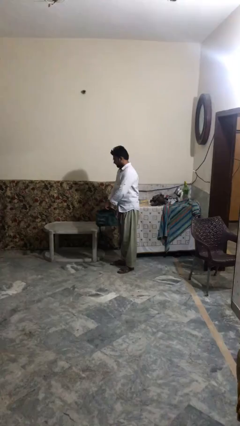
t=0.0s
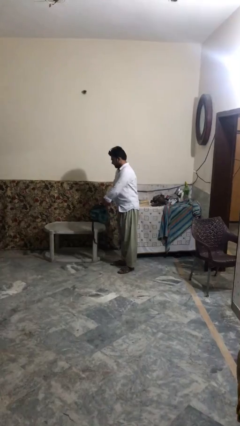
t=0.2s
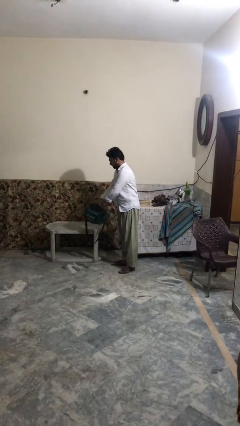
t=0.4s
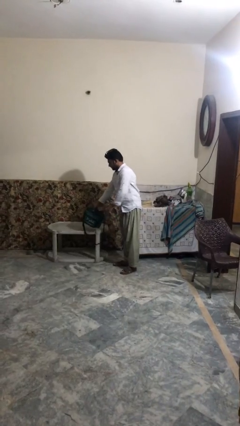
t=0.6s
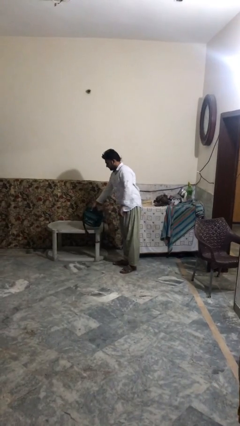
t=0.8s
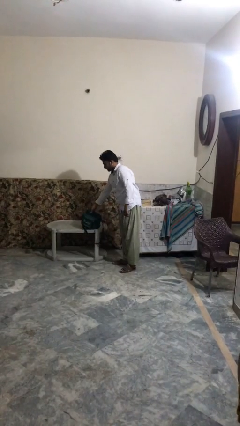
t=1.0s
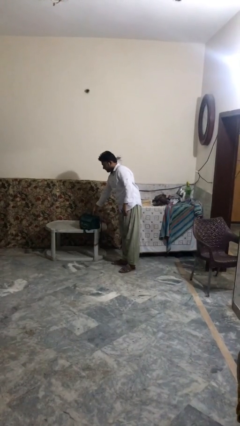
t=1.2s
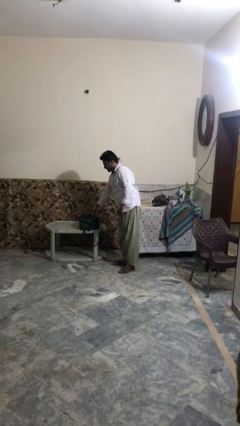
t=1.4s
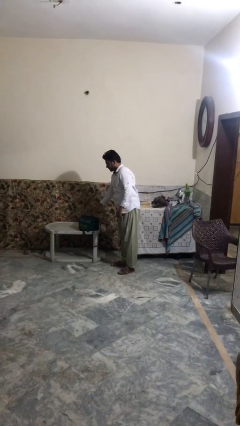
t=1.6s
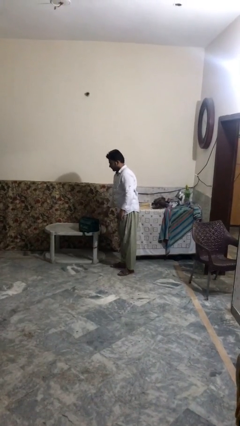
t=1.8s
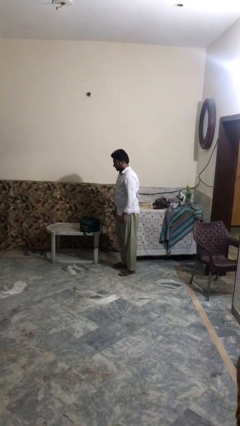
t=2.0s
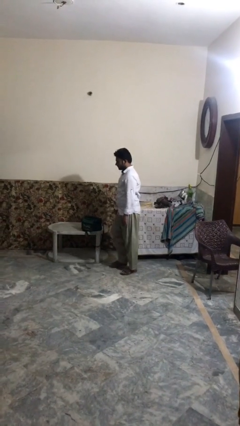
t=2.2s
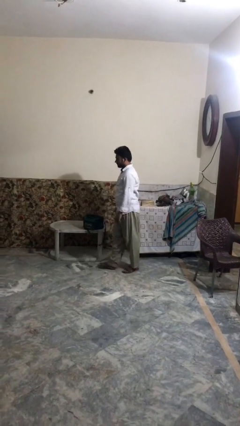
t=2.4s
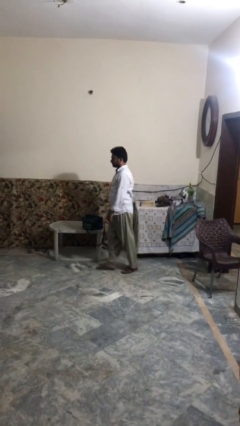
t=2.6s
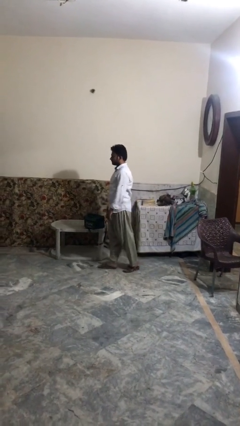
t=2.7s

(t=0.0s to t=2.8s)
person puts down object on table

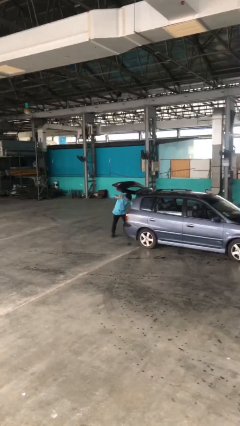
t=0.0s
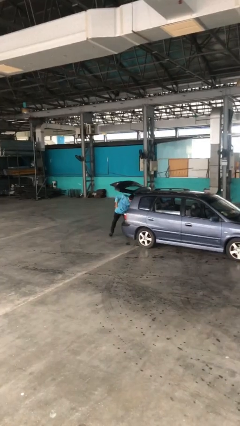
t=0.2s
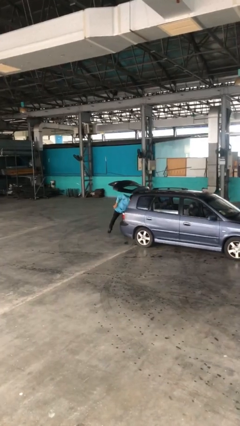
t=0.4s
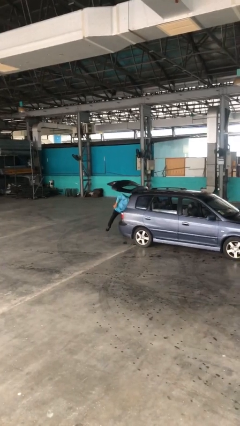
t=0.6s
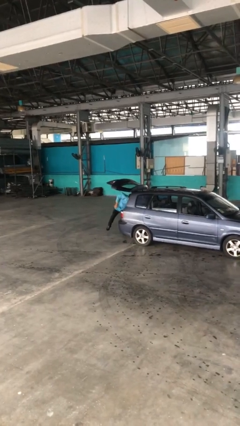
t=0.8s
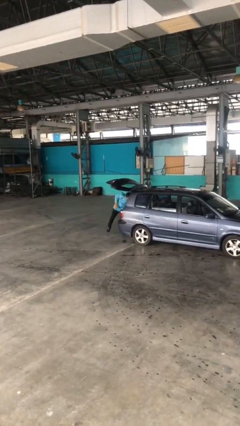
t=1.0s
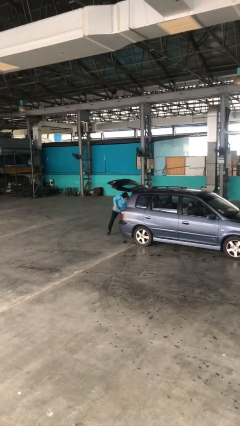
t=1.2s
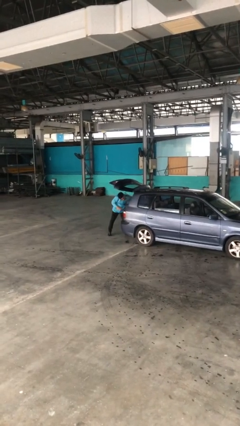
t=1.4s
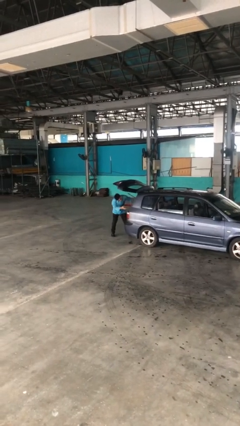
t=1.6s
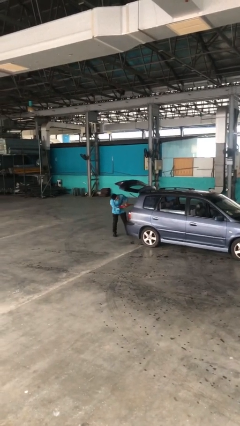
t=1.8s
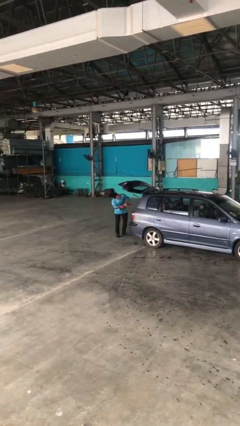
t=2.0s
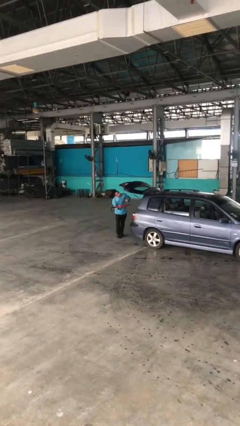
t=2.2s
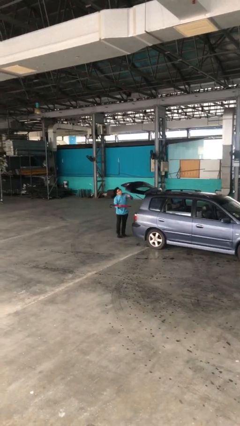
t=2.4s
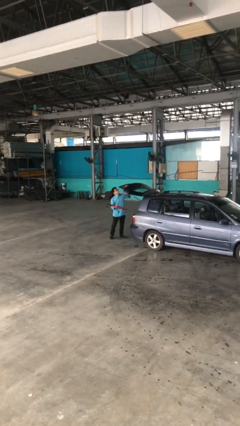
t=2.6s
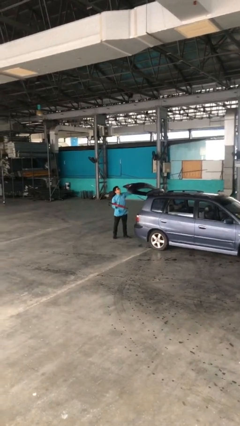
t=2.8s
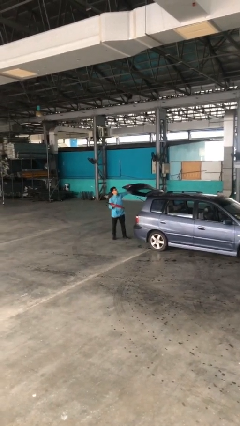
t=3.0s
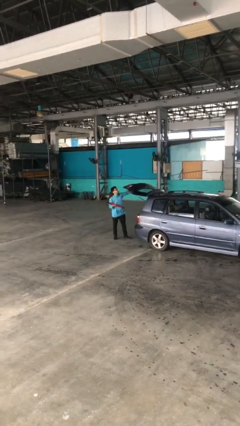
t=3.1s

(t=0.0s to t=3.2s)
person unloads car

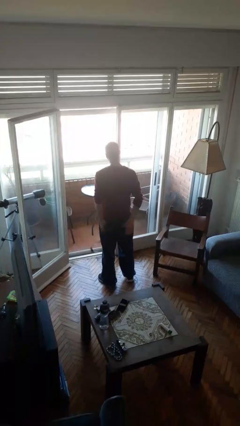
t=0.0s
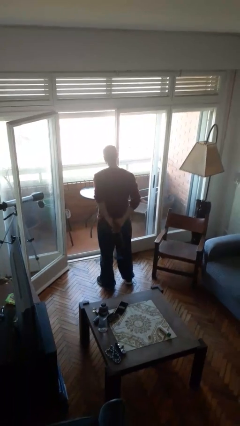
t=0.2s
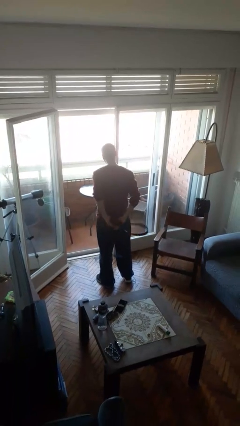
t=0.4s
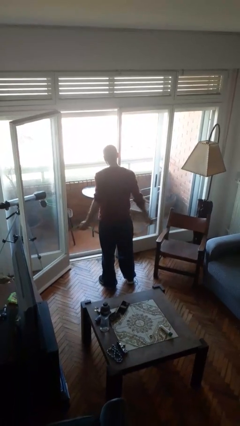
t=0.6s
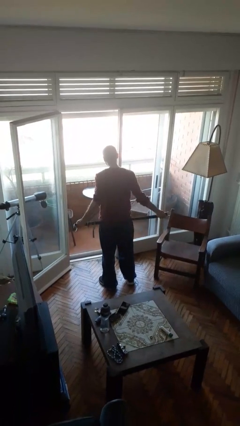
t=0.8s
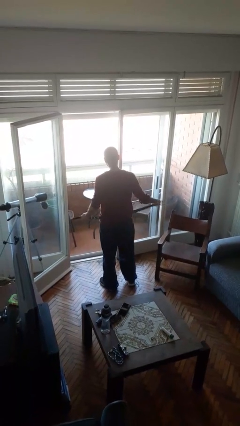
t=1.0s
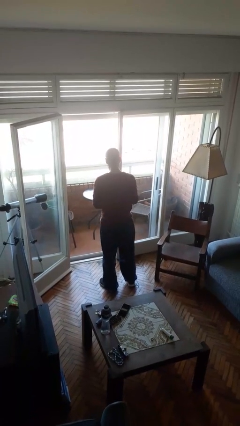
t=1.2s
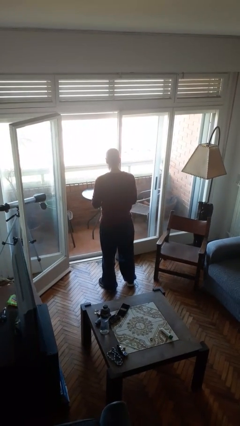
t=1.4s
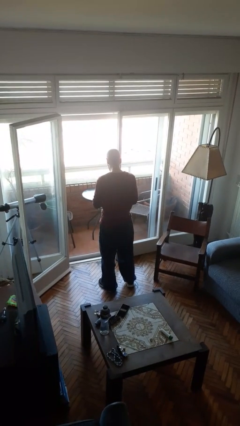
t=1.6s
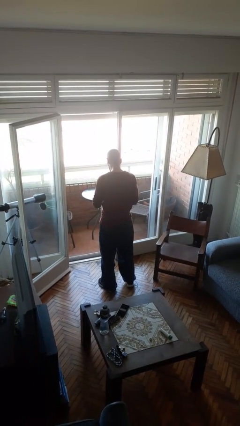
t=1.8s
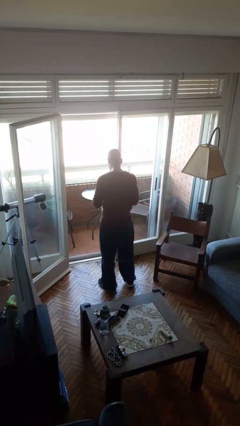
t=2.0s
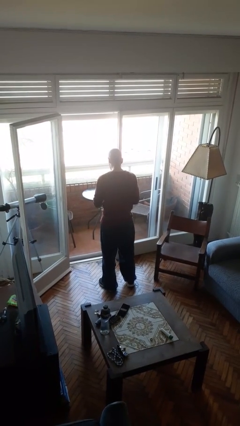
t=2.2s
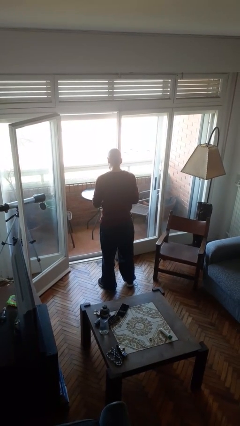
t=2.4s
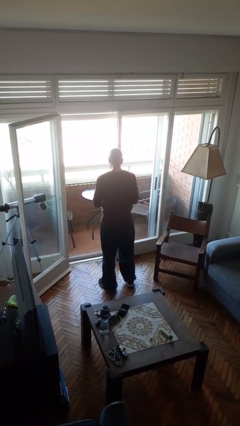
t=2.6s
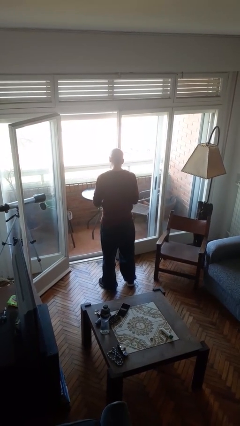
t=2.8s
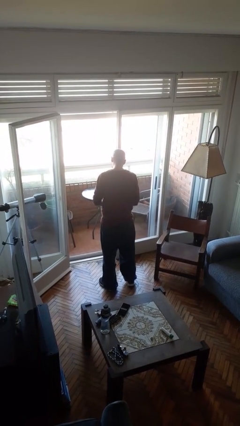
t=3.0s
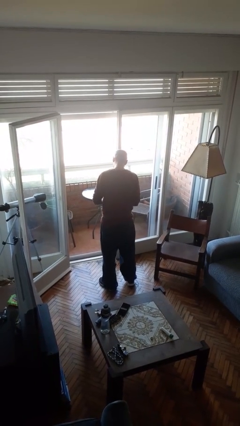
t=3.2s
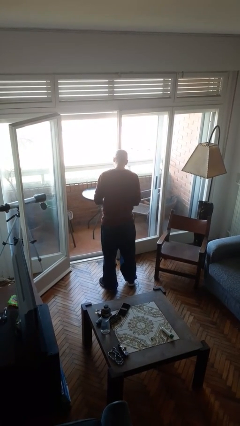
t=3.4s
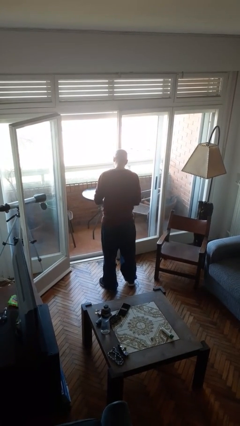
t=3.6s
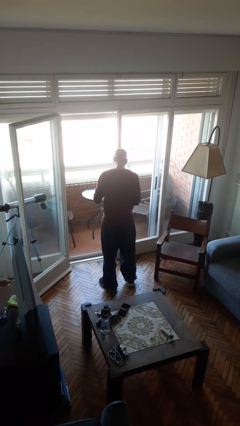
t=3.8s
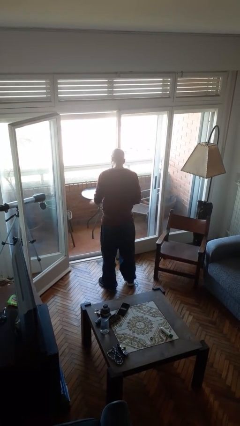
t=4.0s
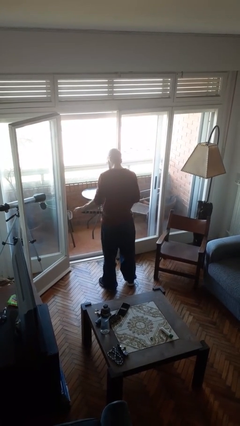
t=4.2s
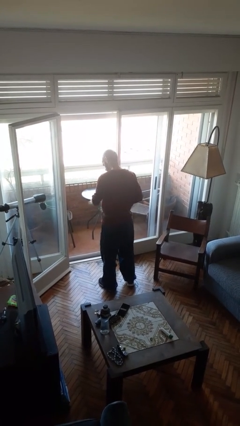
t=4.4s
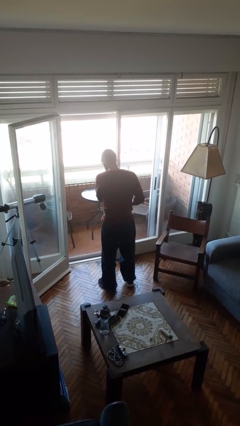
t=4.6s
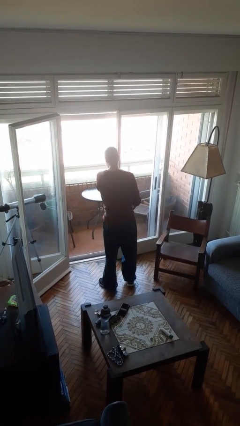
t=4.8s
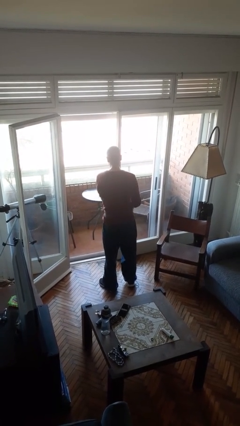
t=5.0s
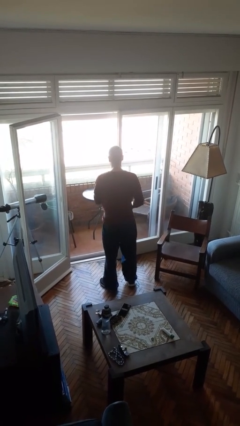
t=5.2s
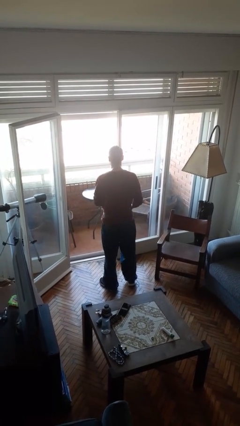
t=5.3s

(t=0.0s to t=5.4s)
person puts on belt

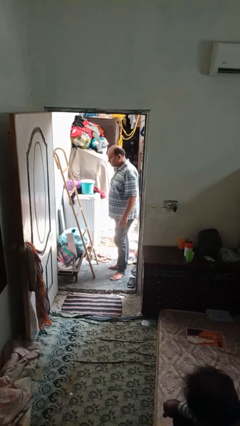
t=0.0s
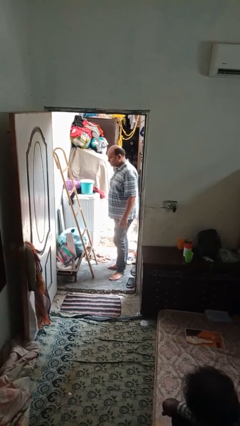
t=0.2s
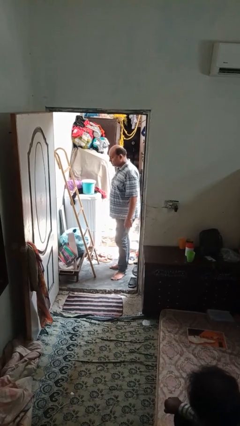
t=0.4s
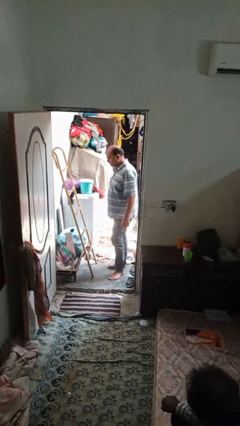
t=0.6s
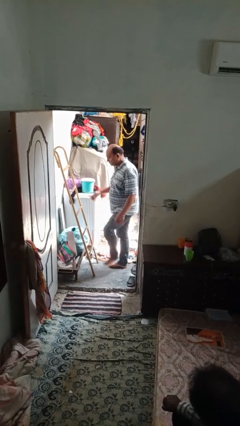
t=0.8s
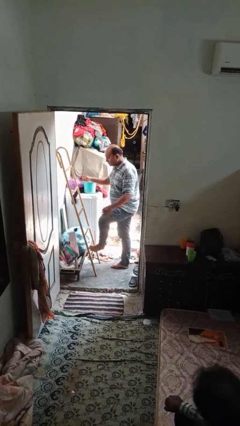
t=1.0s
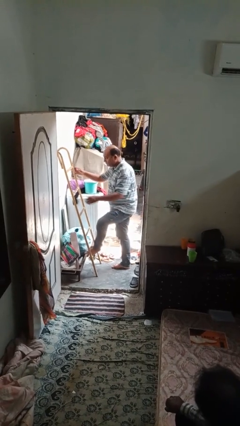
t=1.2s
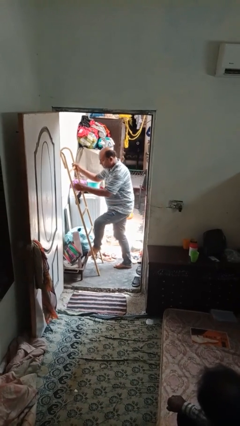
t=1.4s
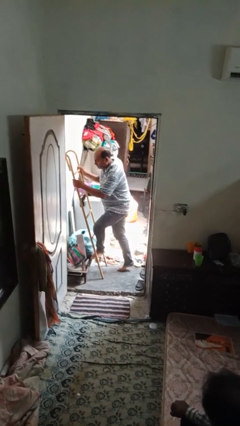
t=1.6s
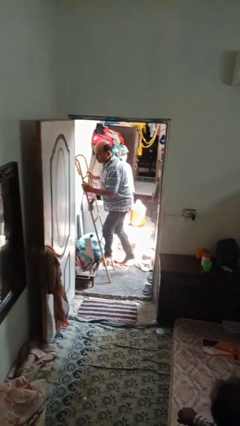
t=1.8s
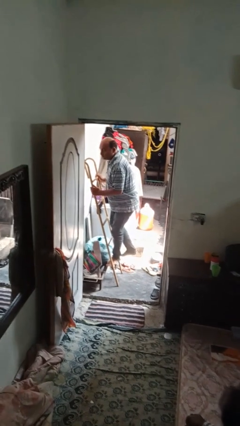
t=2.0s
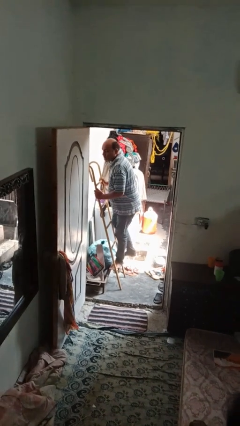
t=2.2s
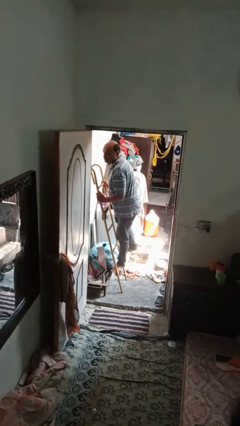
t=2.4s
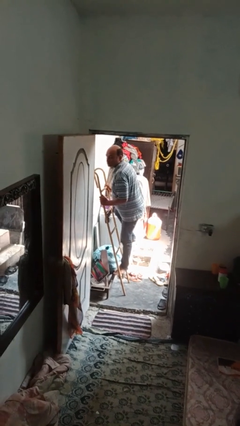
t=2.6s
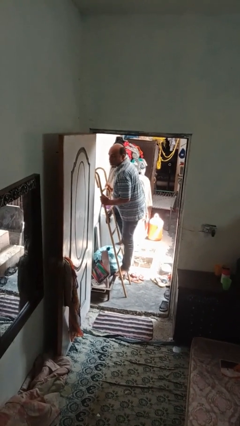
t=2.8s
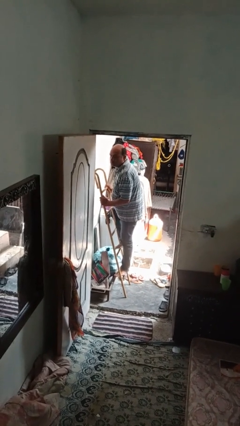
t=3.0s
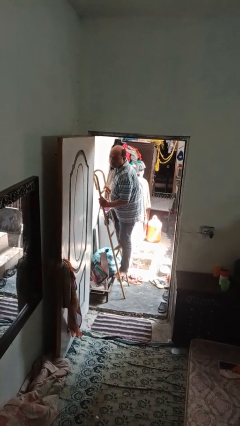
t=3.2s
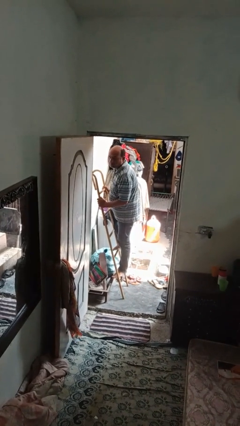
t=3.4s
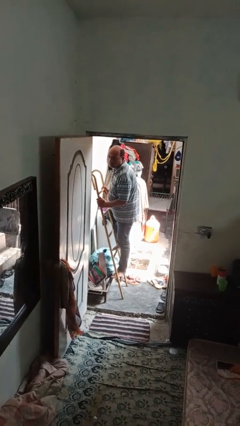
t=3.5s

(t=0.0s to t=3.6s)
person climbs up ladder

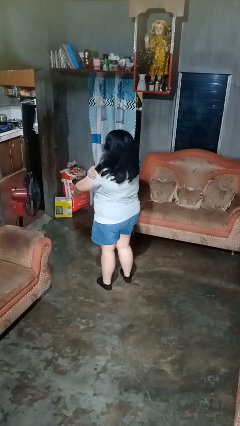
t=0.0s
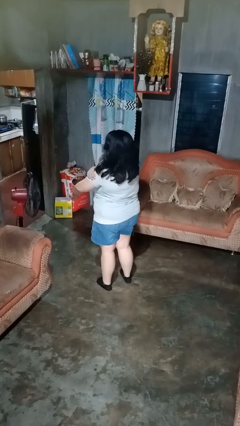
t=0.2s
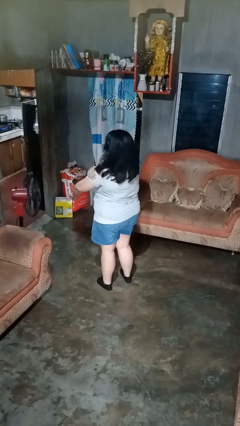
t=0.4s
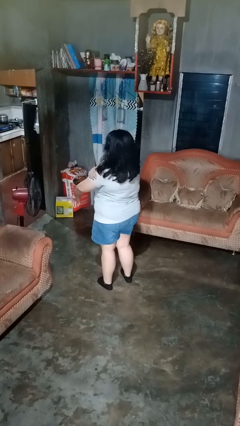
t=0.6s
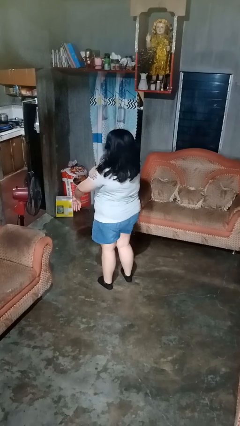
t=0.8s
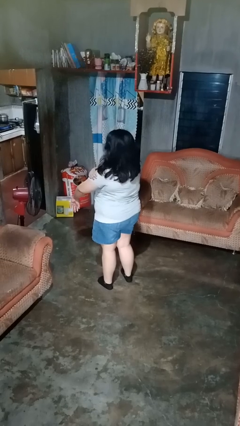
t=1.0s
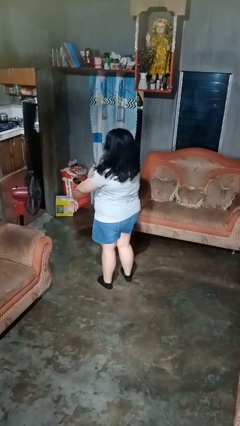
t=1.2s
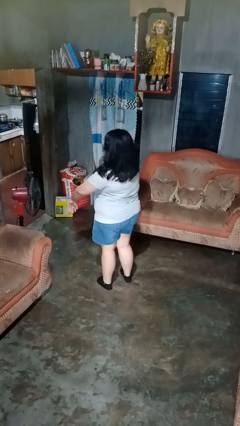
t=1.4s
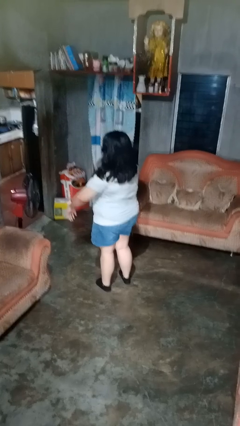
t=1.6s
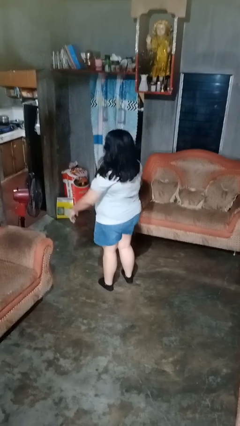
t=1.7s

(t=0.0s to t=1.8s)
person swats bug

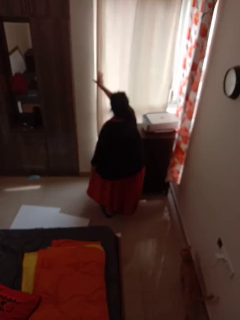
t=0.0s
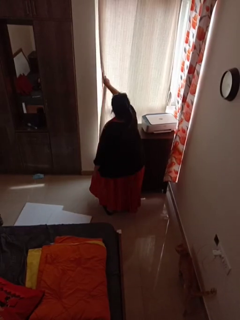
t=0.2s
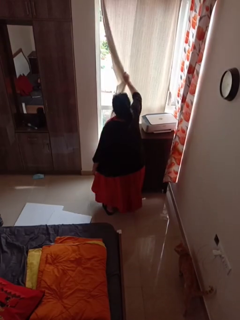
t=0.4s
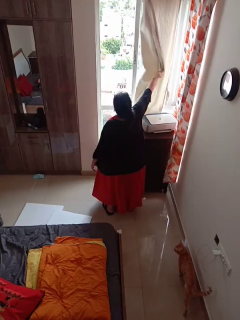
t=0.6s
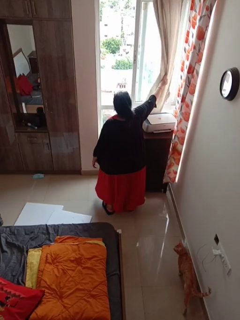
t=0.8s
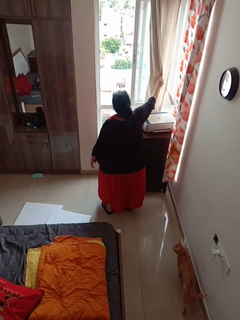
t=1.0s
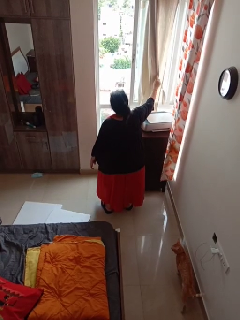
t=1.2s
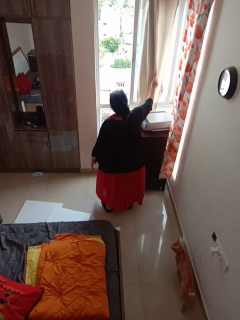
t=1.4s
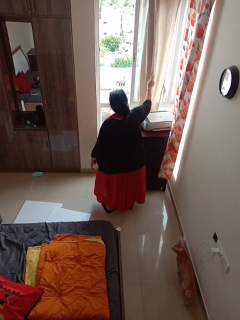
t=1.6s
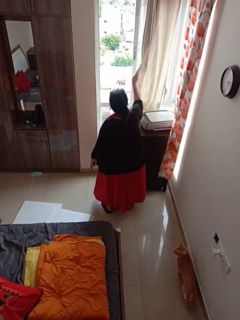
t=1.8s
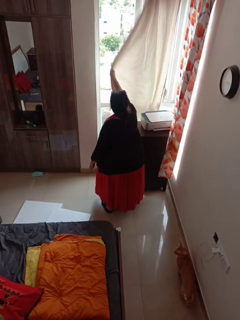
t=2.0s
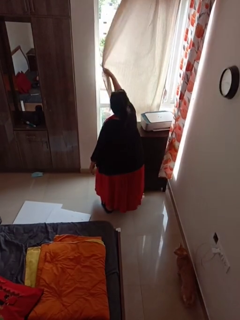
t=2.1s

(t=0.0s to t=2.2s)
person opens curtains
